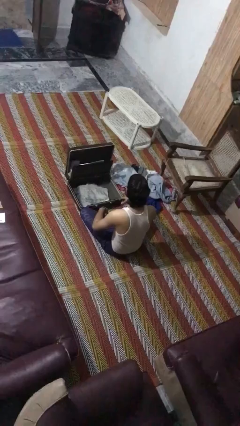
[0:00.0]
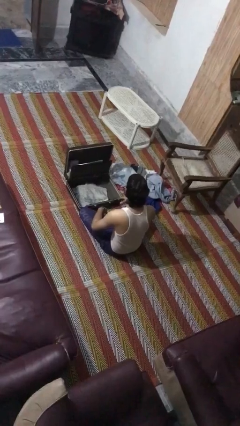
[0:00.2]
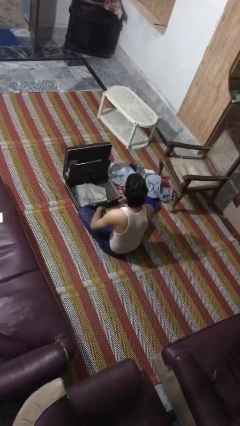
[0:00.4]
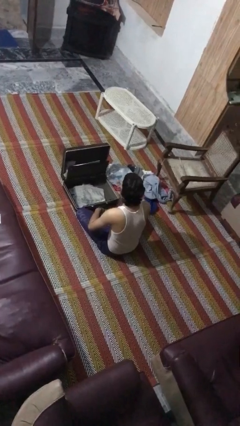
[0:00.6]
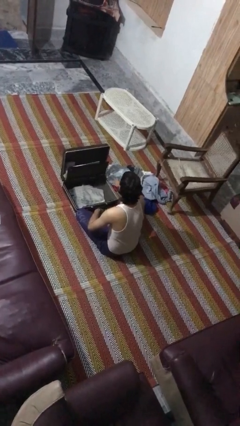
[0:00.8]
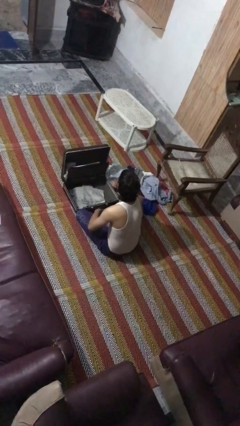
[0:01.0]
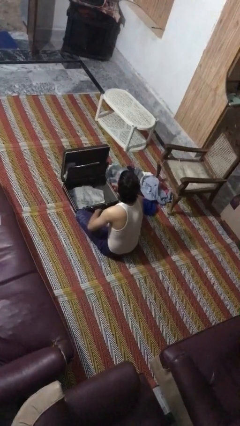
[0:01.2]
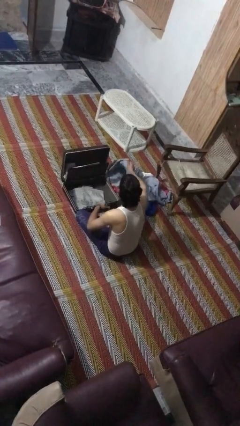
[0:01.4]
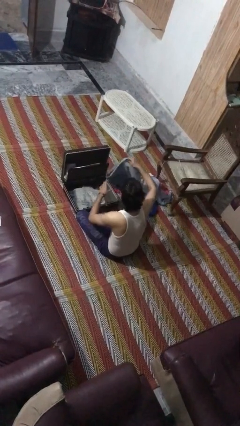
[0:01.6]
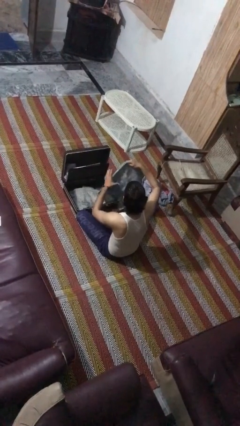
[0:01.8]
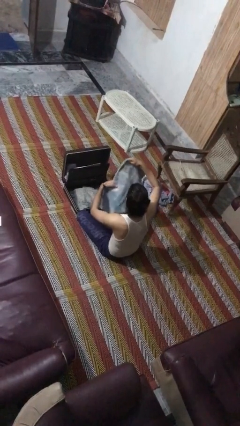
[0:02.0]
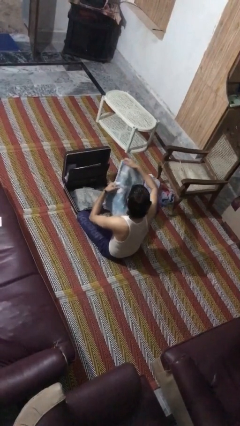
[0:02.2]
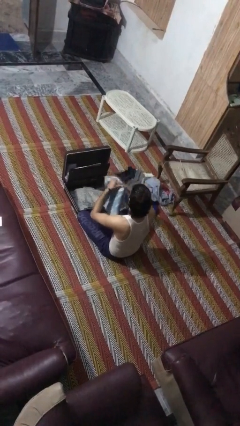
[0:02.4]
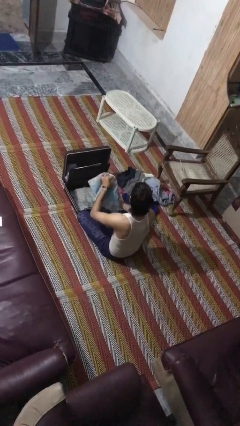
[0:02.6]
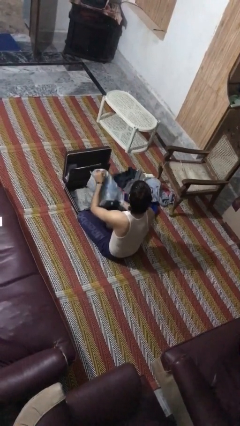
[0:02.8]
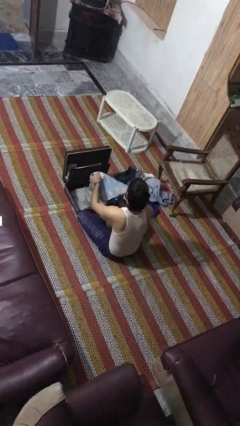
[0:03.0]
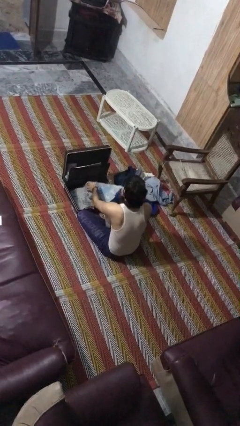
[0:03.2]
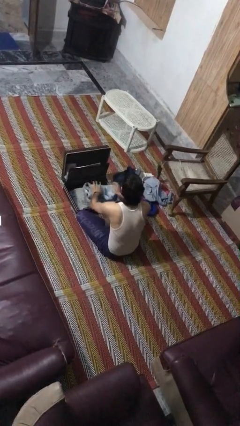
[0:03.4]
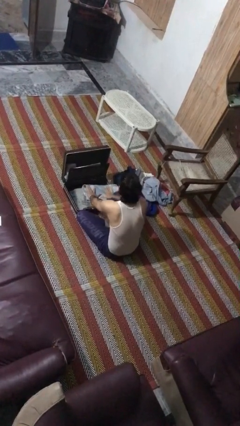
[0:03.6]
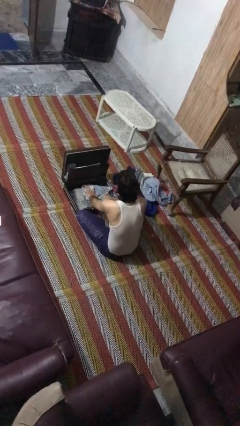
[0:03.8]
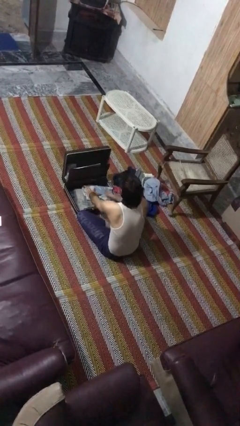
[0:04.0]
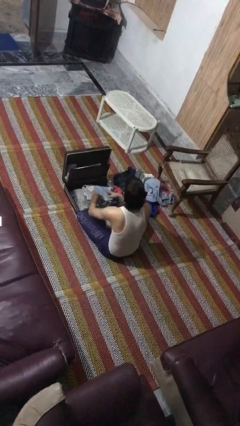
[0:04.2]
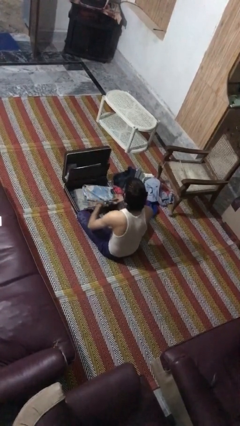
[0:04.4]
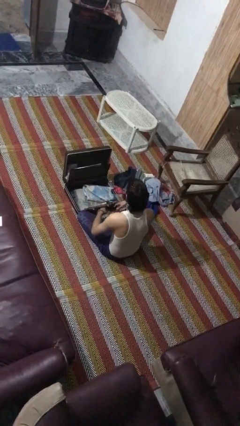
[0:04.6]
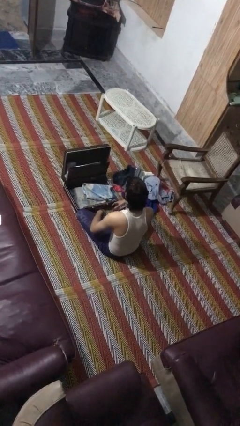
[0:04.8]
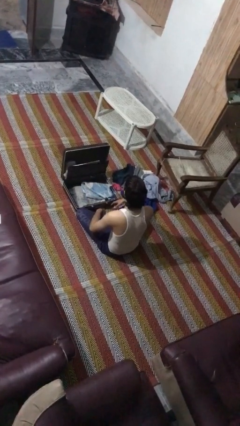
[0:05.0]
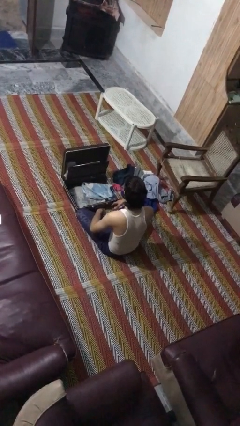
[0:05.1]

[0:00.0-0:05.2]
person loads clothes into suitcase

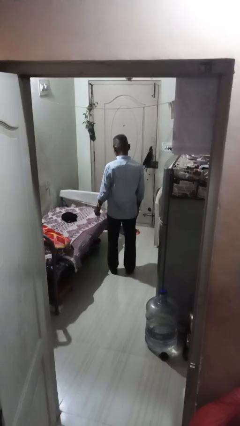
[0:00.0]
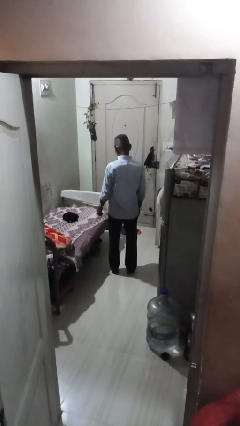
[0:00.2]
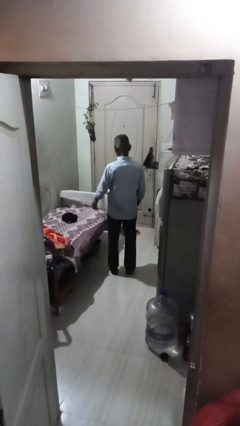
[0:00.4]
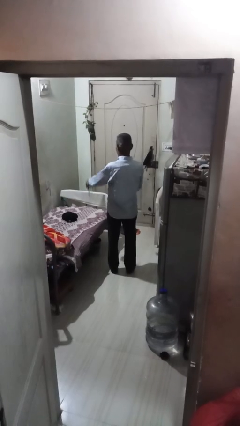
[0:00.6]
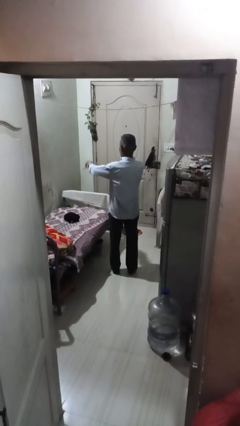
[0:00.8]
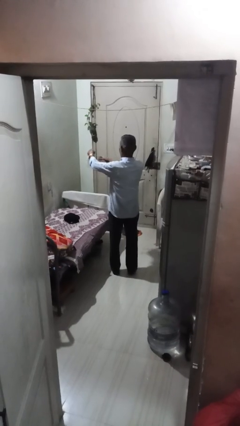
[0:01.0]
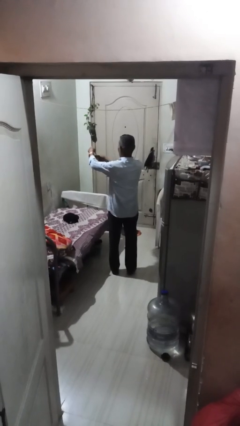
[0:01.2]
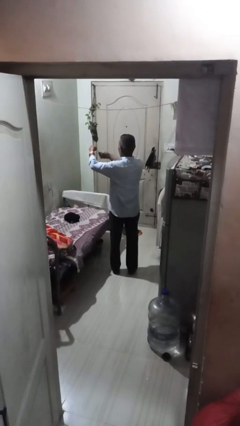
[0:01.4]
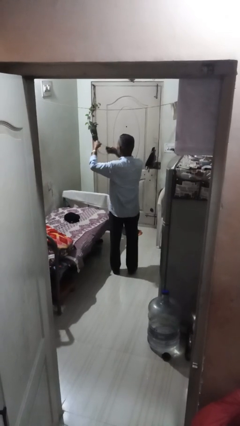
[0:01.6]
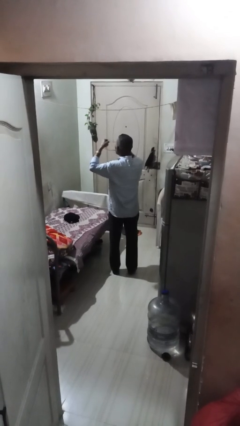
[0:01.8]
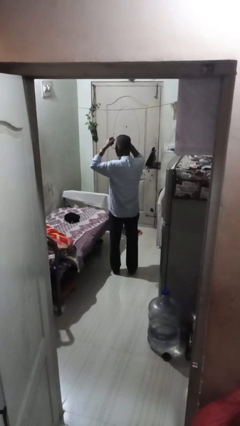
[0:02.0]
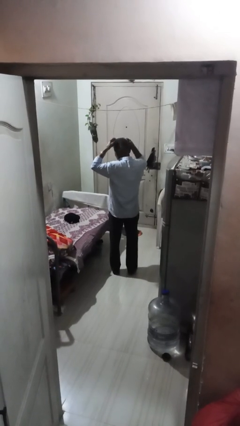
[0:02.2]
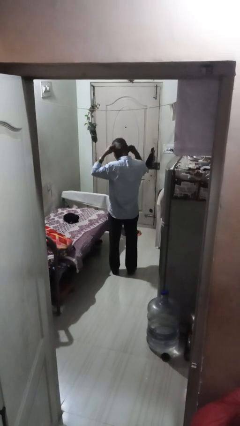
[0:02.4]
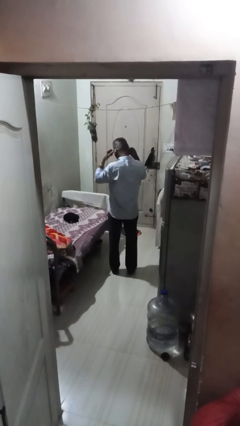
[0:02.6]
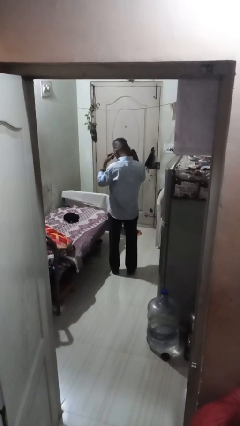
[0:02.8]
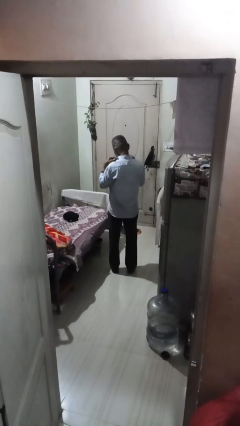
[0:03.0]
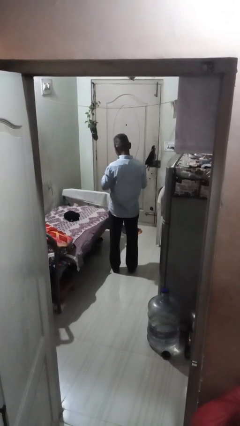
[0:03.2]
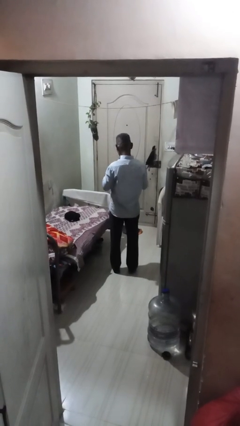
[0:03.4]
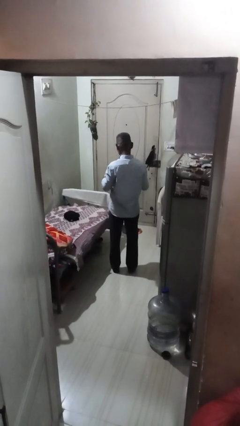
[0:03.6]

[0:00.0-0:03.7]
person puts on necklace

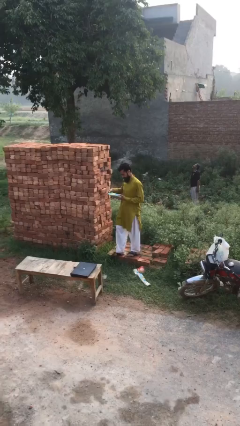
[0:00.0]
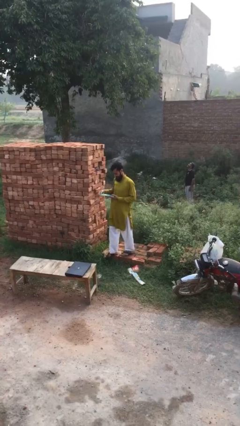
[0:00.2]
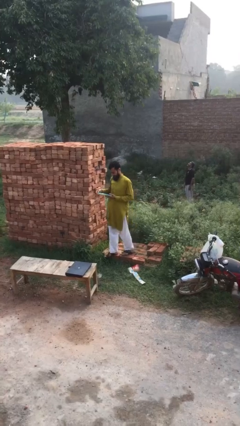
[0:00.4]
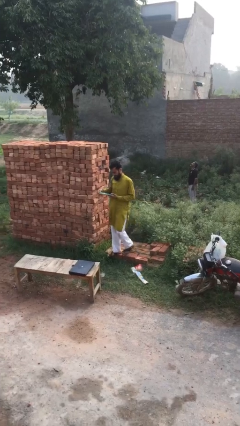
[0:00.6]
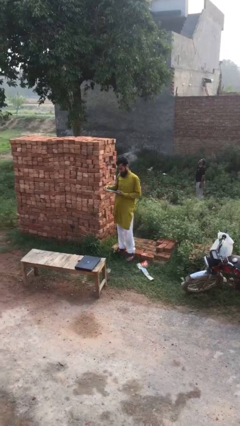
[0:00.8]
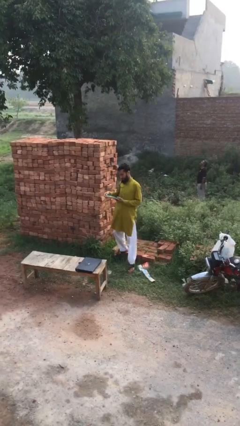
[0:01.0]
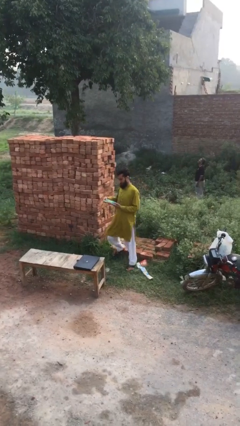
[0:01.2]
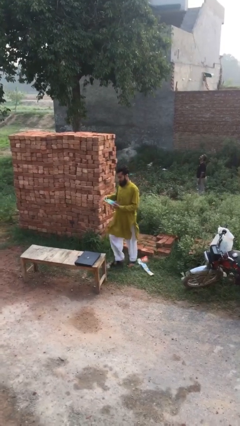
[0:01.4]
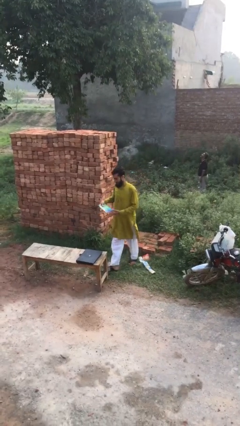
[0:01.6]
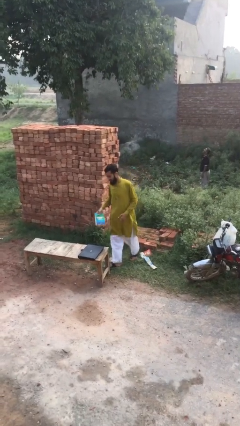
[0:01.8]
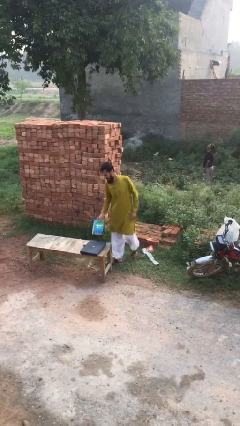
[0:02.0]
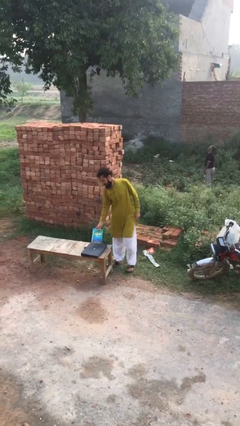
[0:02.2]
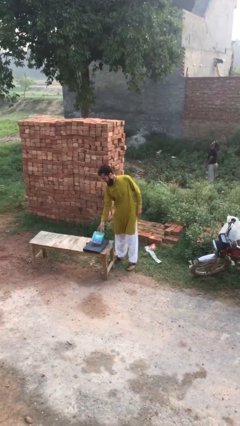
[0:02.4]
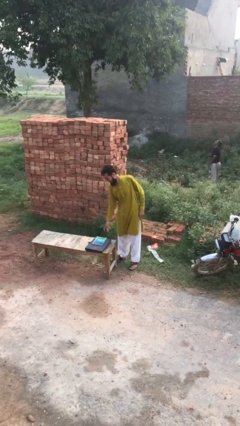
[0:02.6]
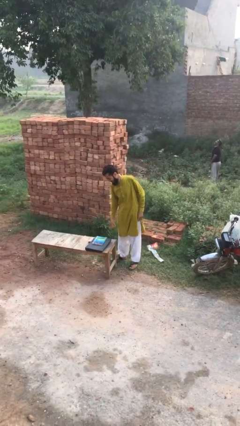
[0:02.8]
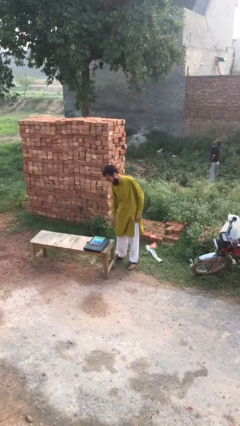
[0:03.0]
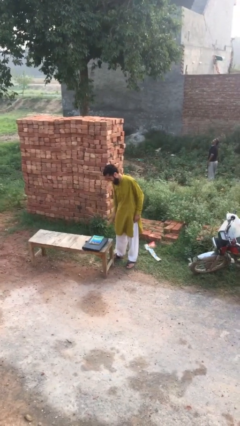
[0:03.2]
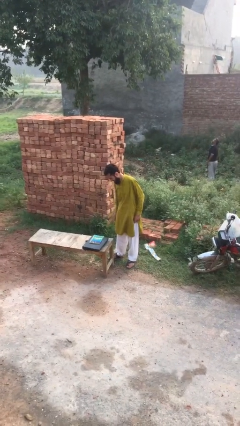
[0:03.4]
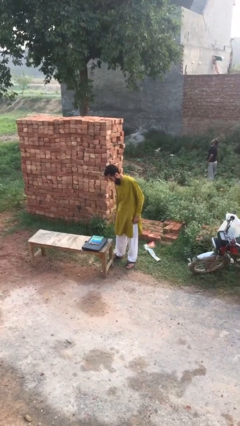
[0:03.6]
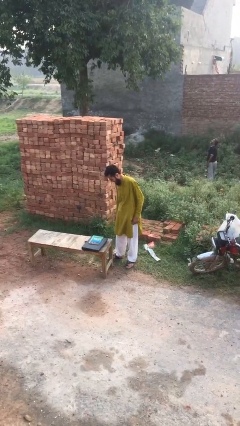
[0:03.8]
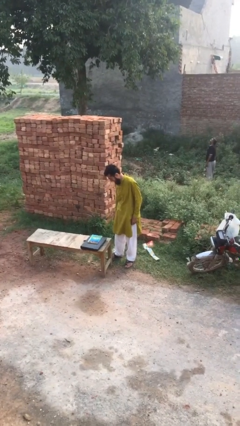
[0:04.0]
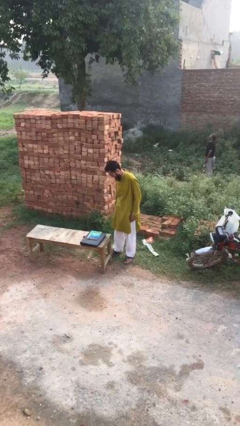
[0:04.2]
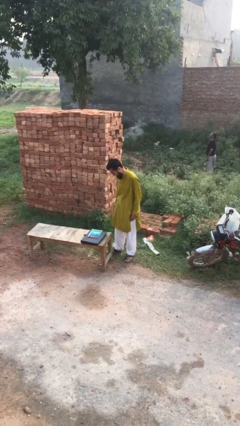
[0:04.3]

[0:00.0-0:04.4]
person puts down object on table

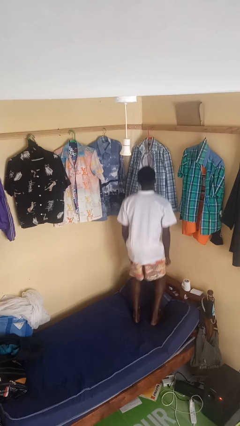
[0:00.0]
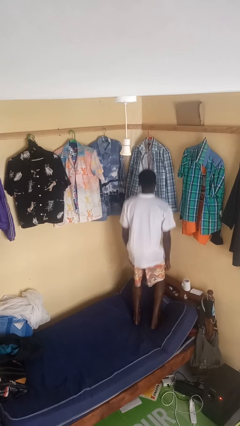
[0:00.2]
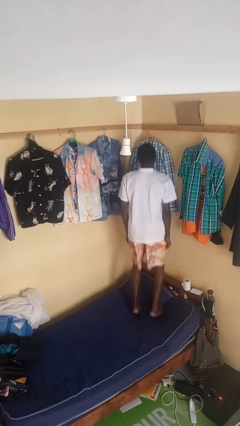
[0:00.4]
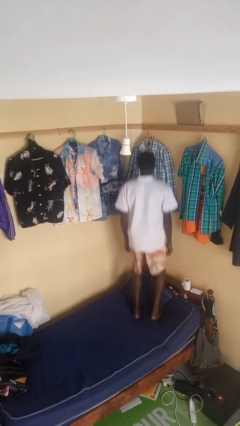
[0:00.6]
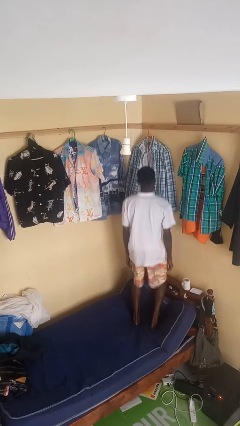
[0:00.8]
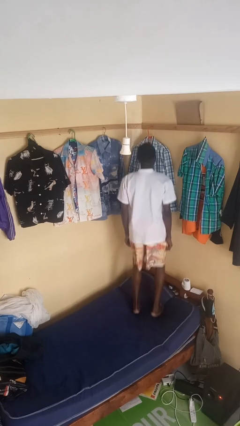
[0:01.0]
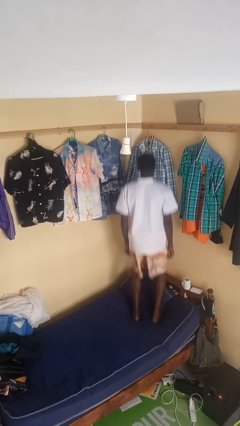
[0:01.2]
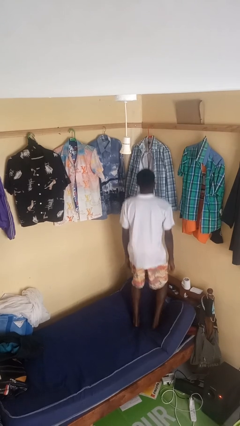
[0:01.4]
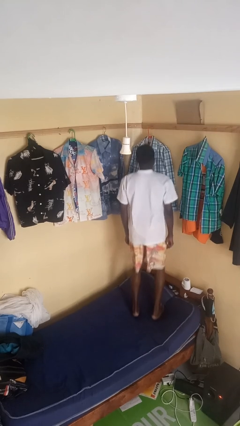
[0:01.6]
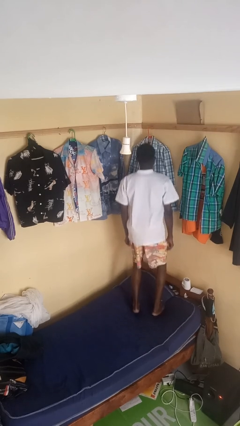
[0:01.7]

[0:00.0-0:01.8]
person jumps on bed

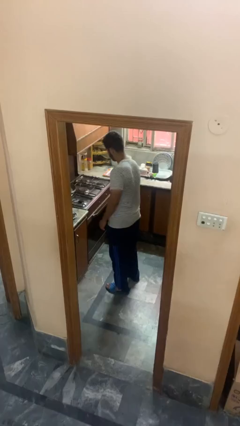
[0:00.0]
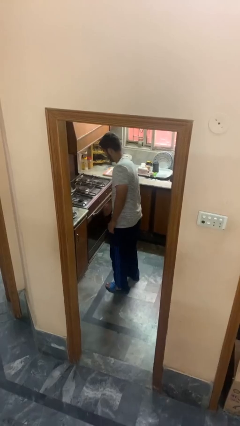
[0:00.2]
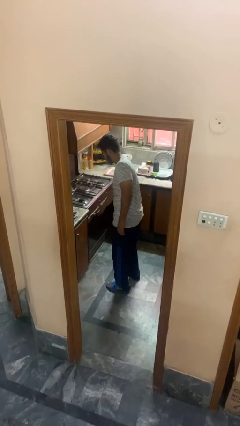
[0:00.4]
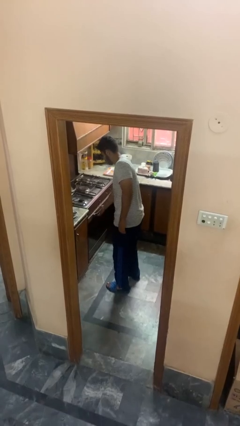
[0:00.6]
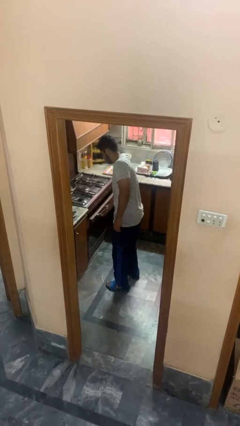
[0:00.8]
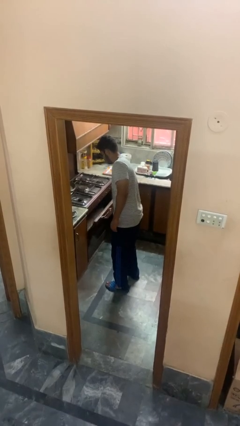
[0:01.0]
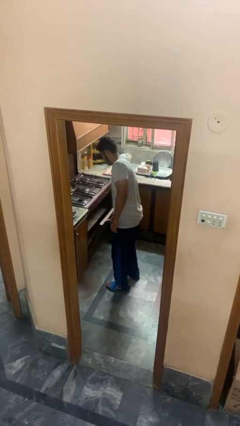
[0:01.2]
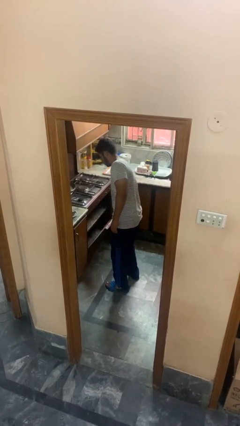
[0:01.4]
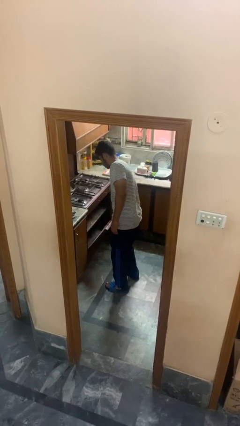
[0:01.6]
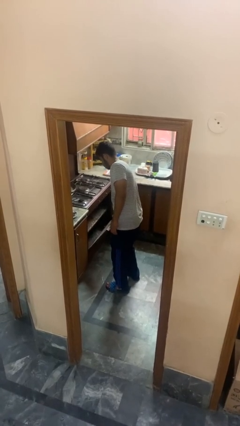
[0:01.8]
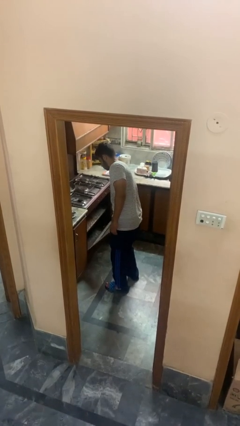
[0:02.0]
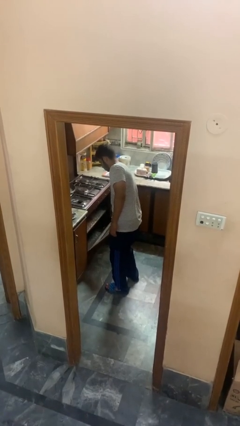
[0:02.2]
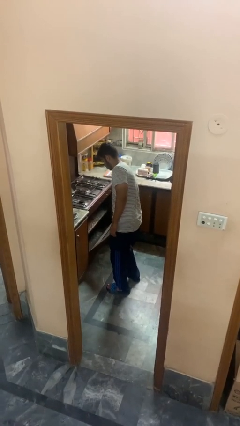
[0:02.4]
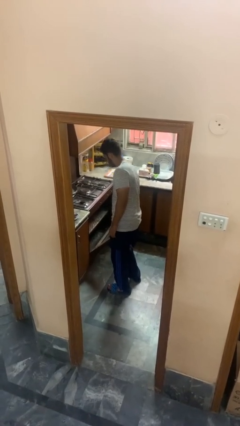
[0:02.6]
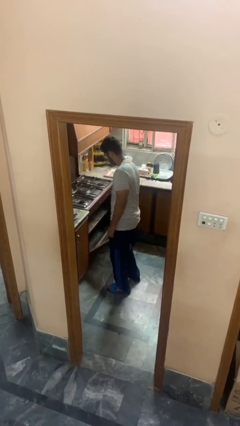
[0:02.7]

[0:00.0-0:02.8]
person opens oven door
